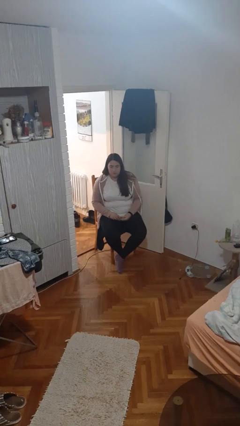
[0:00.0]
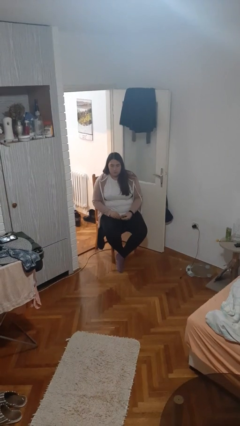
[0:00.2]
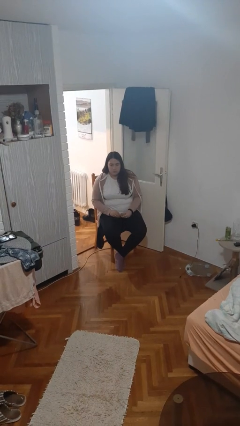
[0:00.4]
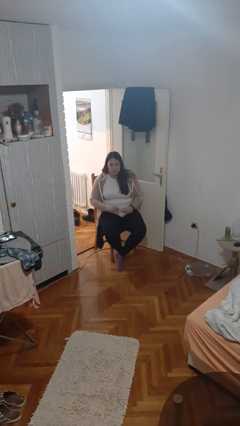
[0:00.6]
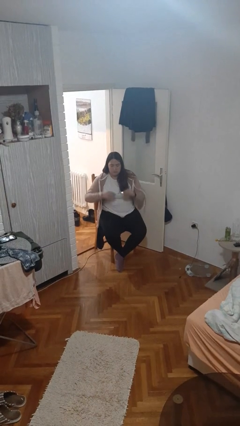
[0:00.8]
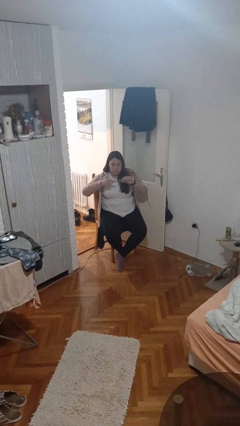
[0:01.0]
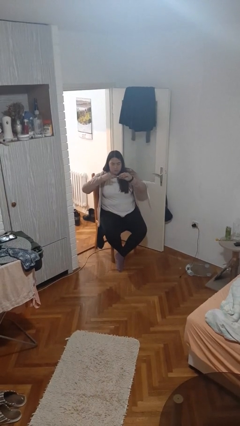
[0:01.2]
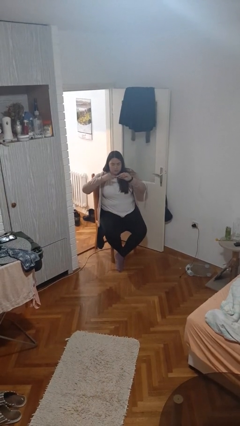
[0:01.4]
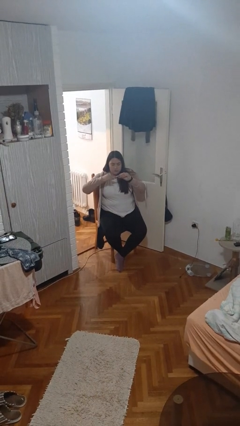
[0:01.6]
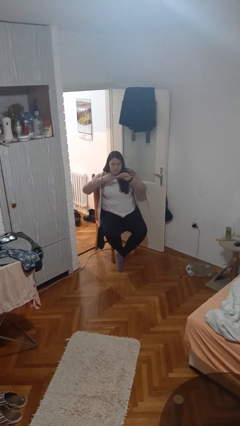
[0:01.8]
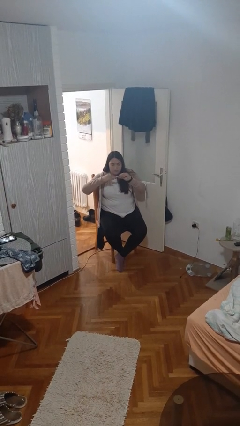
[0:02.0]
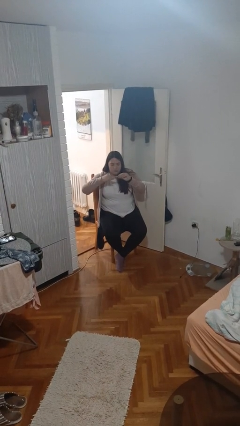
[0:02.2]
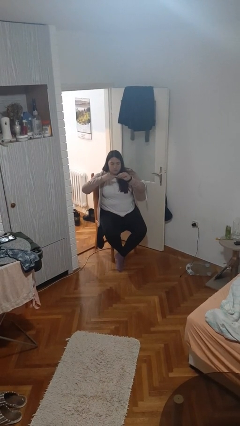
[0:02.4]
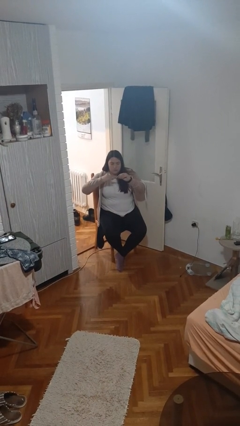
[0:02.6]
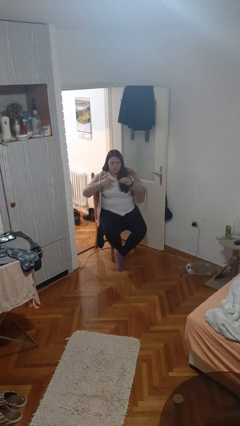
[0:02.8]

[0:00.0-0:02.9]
person clips fingernails

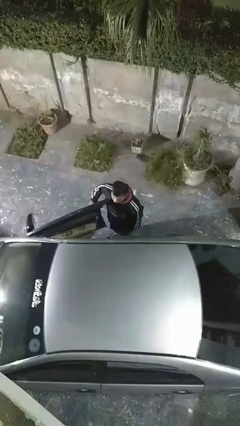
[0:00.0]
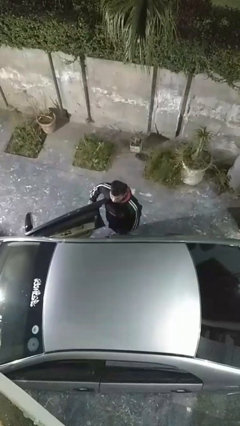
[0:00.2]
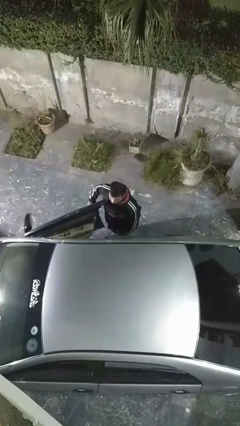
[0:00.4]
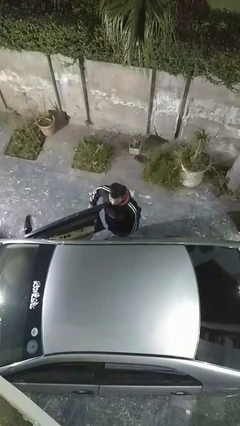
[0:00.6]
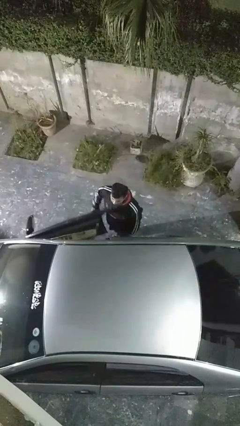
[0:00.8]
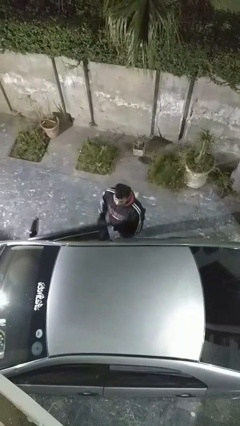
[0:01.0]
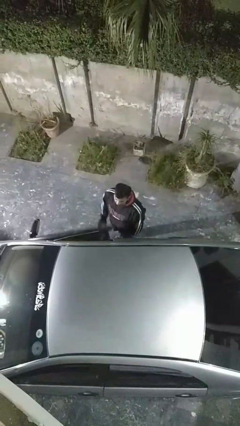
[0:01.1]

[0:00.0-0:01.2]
person closes car door

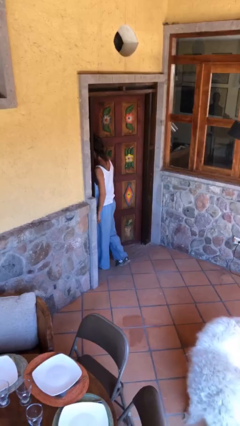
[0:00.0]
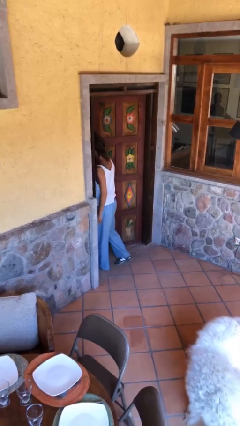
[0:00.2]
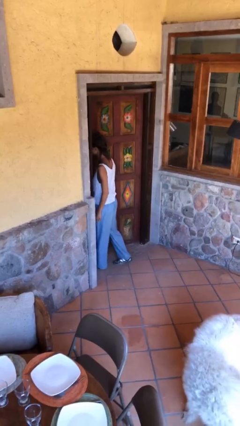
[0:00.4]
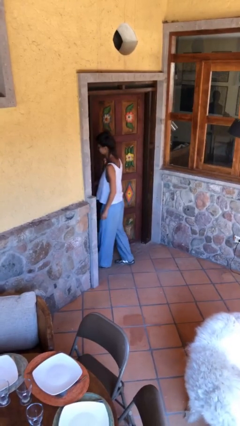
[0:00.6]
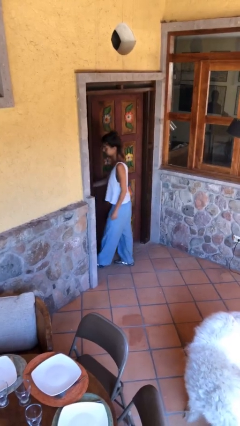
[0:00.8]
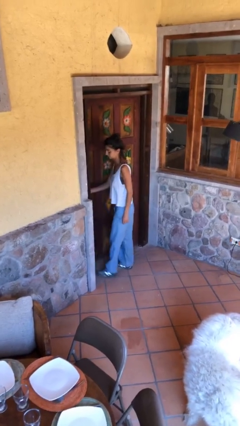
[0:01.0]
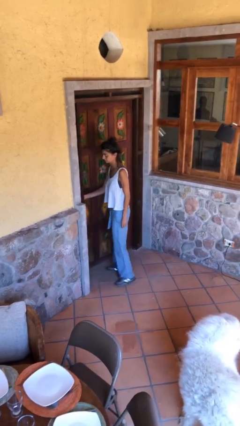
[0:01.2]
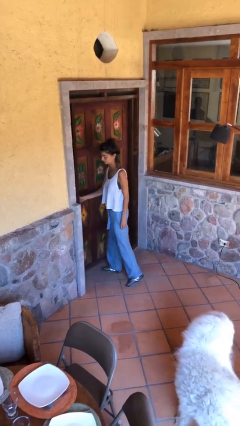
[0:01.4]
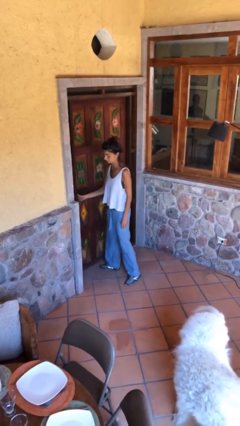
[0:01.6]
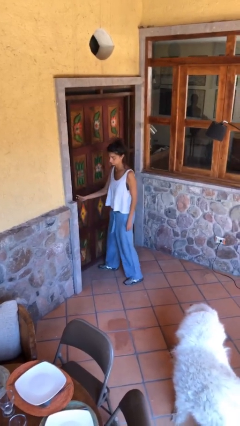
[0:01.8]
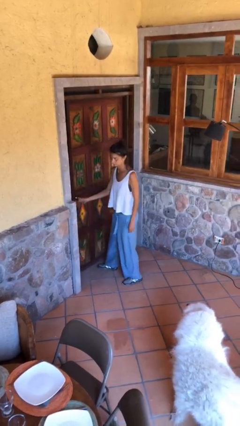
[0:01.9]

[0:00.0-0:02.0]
person closes facility door

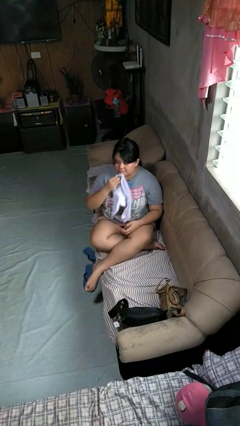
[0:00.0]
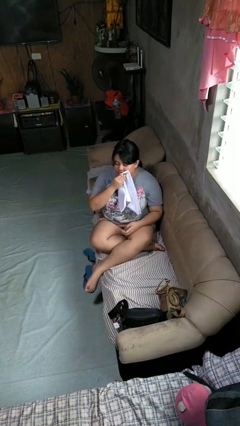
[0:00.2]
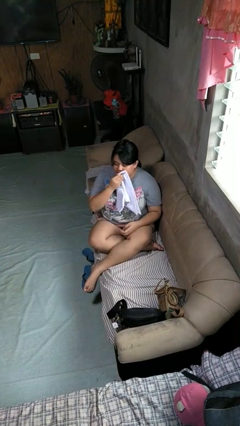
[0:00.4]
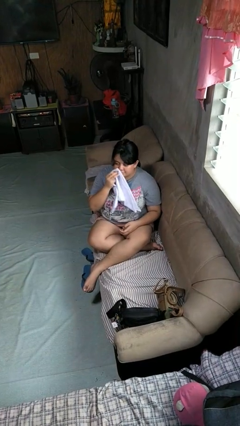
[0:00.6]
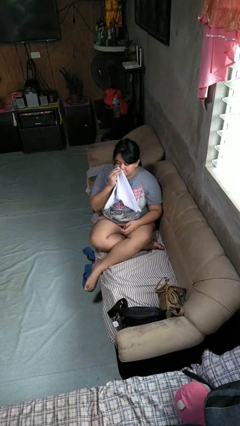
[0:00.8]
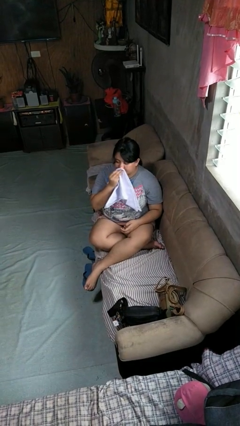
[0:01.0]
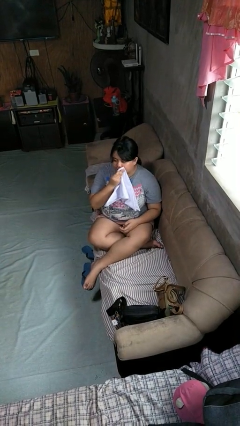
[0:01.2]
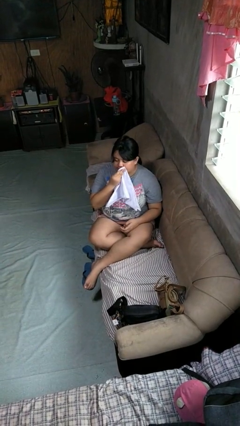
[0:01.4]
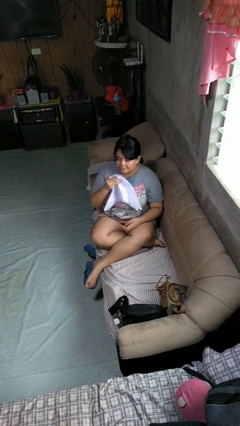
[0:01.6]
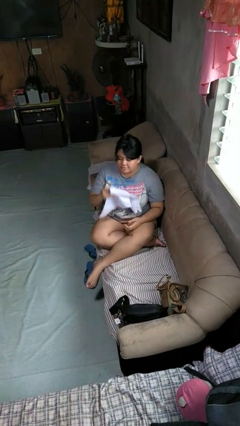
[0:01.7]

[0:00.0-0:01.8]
person wipes mouth with napkin

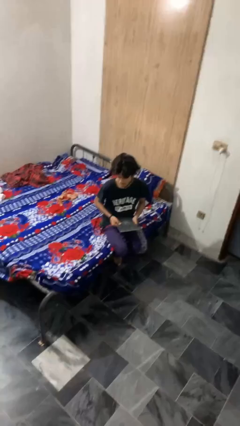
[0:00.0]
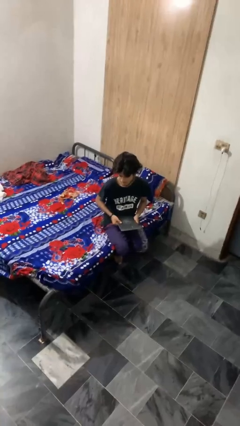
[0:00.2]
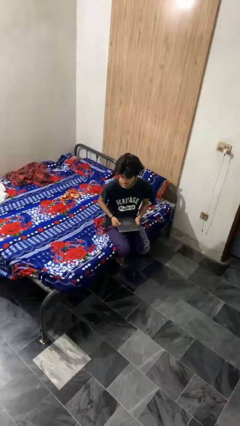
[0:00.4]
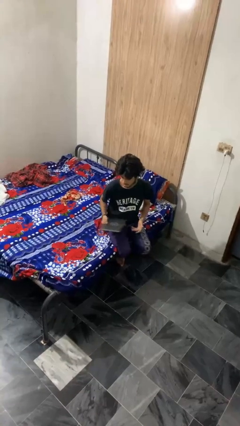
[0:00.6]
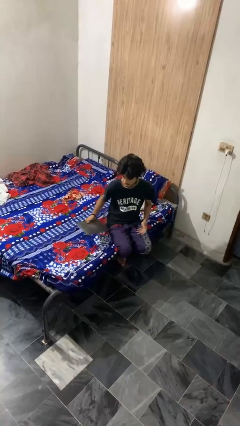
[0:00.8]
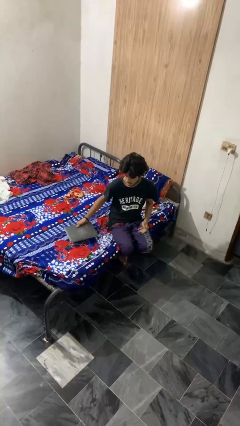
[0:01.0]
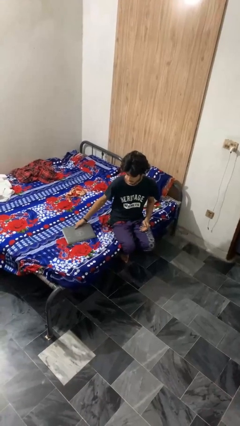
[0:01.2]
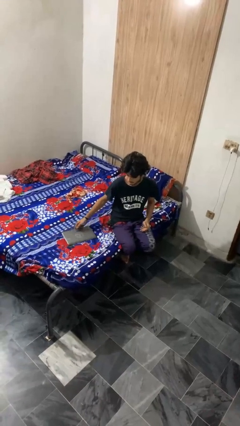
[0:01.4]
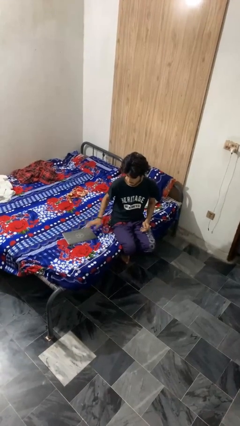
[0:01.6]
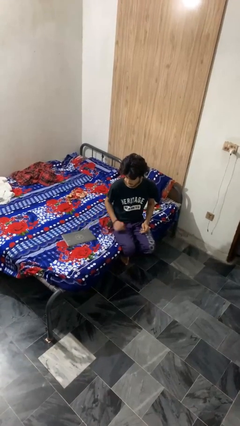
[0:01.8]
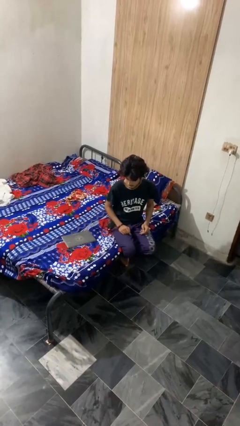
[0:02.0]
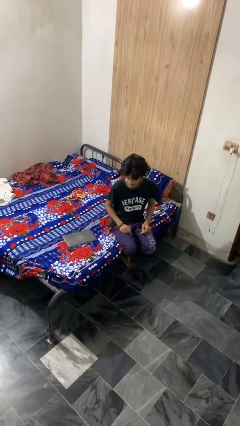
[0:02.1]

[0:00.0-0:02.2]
person puts down object on bed

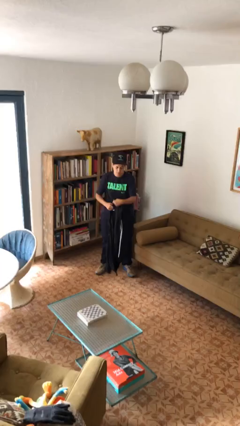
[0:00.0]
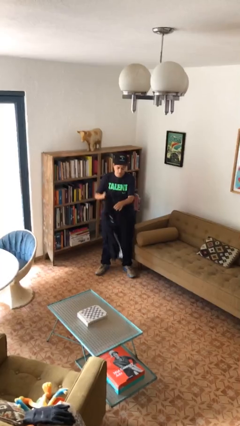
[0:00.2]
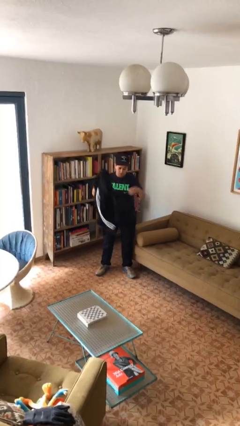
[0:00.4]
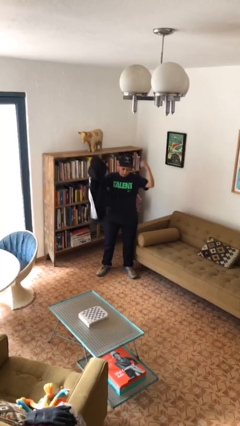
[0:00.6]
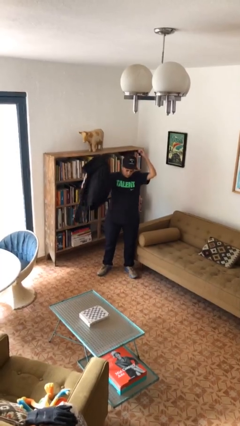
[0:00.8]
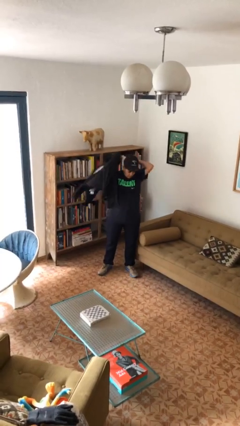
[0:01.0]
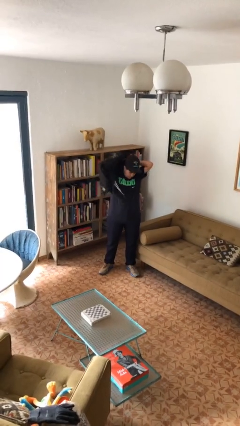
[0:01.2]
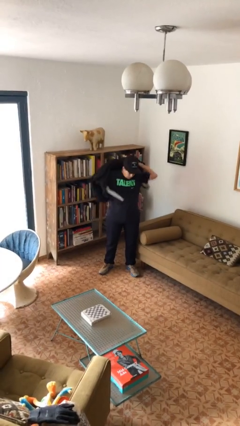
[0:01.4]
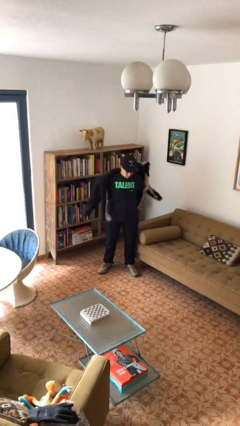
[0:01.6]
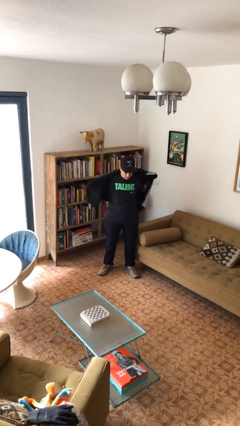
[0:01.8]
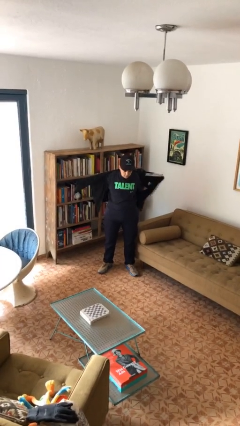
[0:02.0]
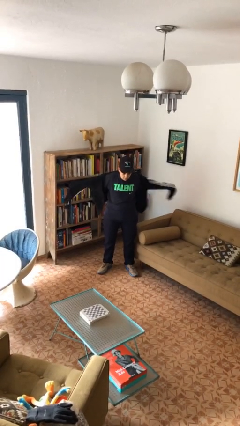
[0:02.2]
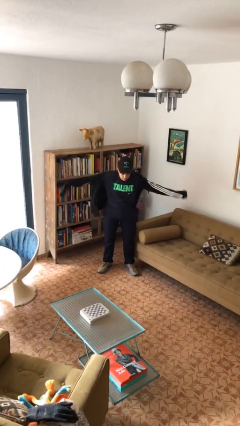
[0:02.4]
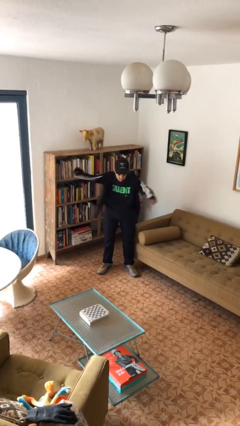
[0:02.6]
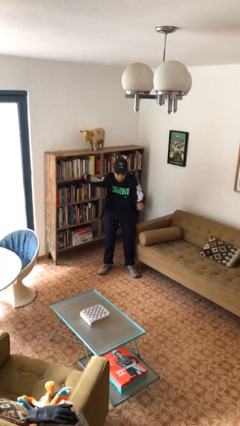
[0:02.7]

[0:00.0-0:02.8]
person puts on jacket

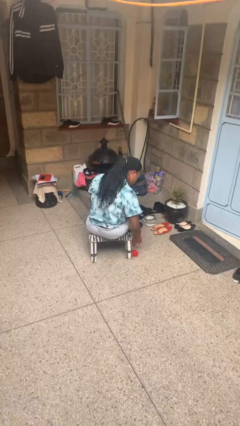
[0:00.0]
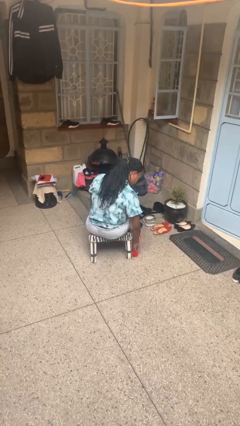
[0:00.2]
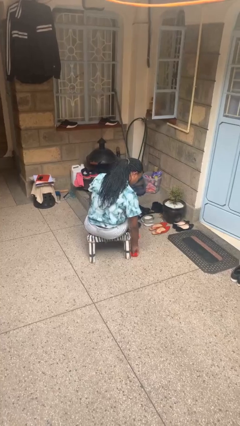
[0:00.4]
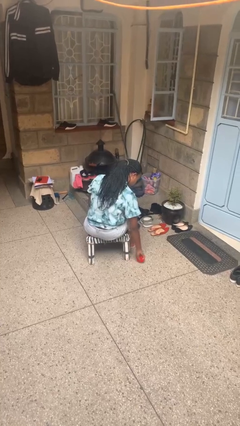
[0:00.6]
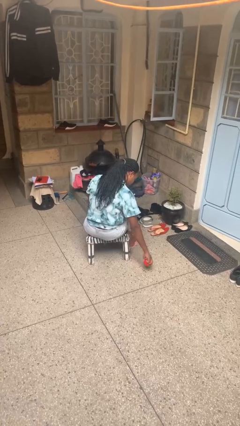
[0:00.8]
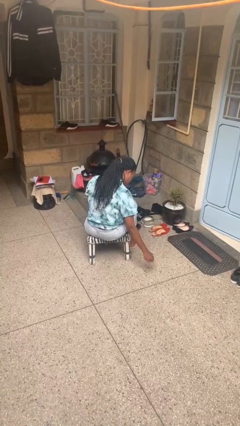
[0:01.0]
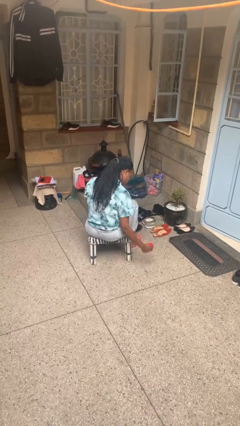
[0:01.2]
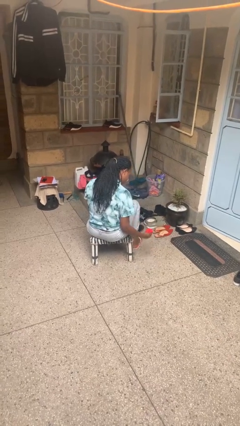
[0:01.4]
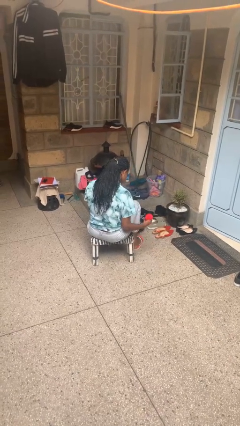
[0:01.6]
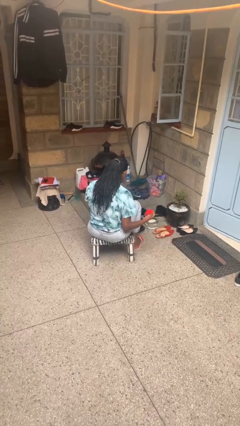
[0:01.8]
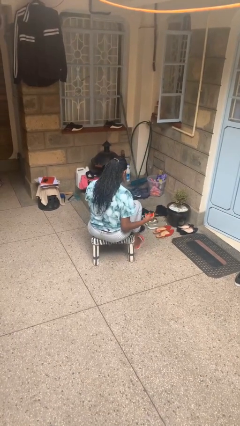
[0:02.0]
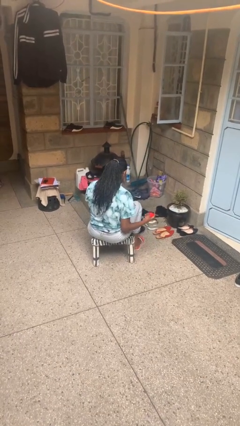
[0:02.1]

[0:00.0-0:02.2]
person picks up object from floor

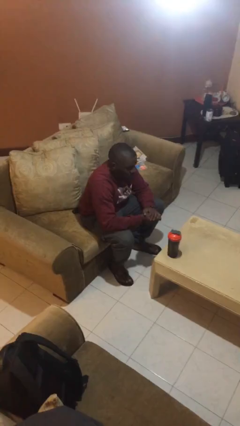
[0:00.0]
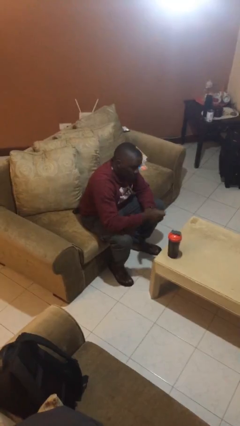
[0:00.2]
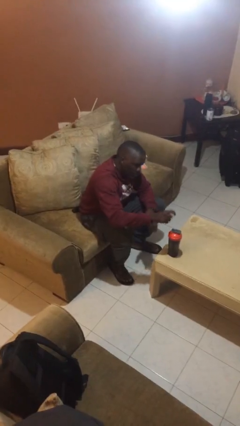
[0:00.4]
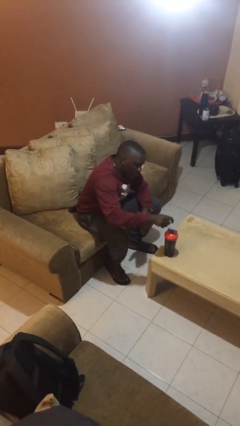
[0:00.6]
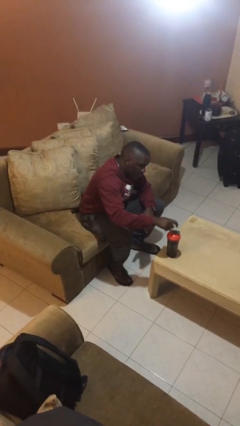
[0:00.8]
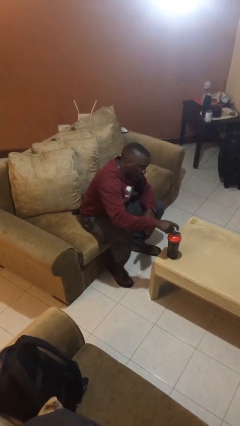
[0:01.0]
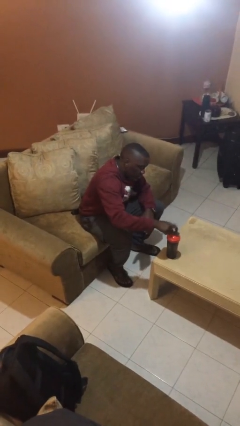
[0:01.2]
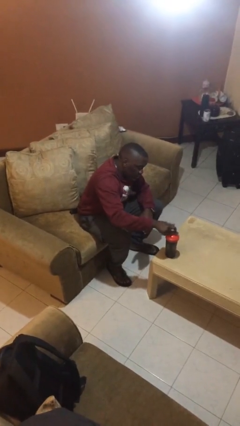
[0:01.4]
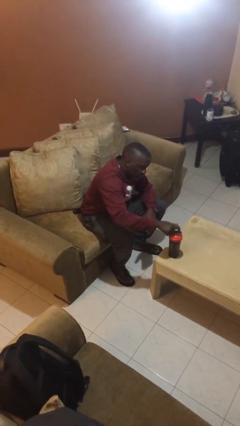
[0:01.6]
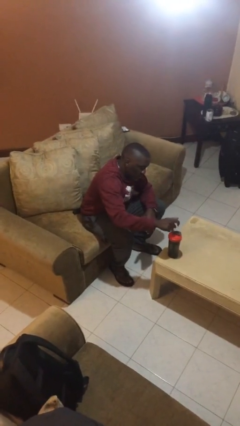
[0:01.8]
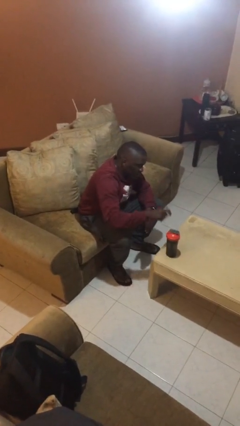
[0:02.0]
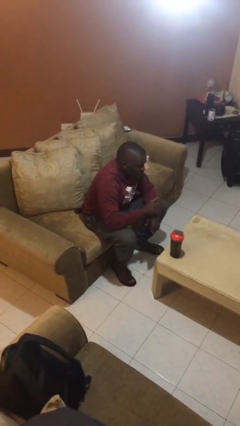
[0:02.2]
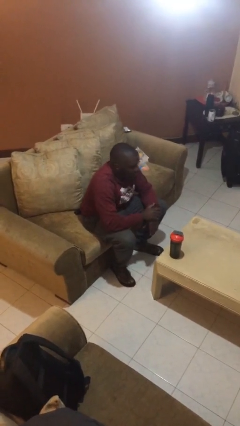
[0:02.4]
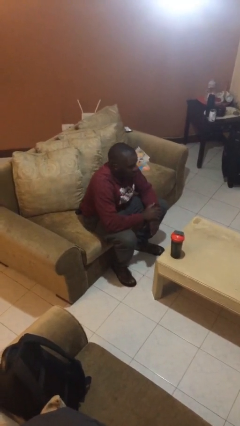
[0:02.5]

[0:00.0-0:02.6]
person taps object with finger
